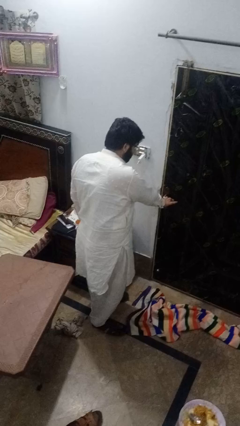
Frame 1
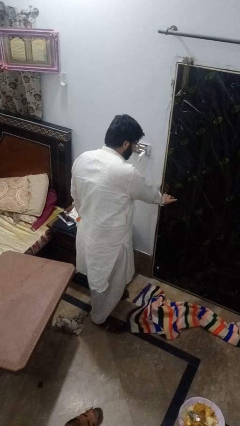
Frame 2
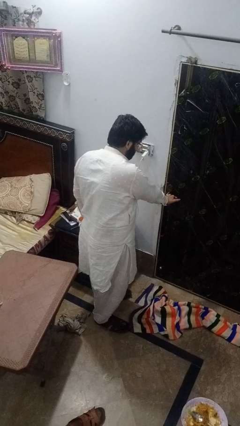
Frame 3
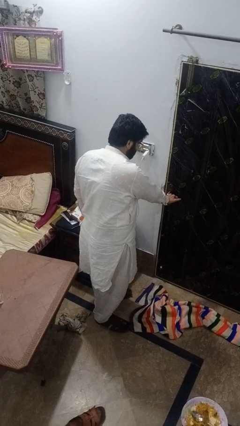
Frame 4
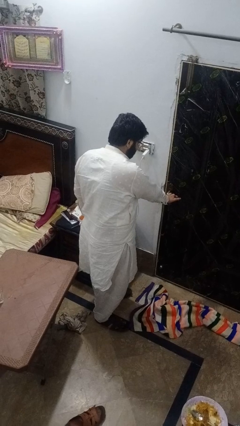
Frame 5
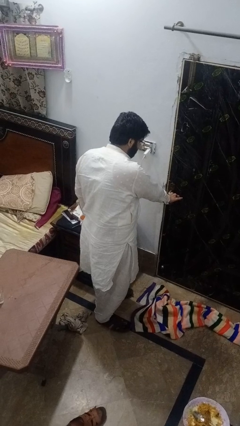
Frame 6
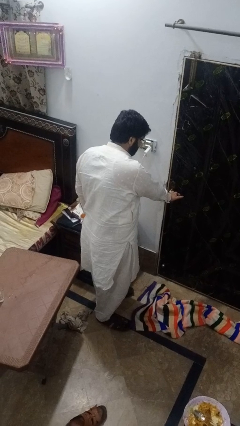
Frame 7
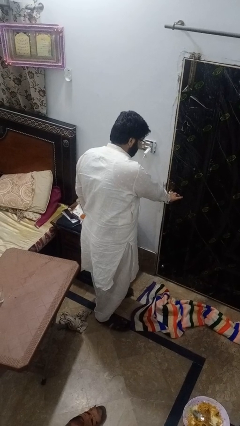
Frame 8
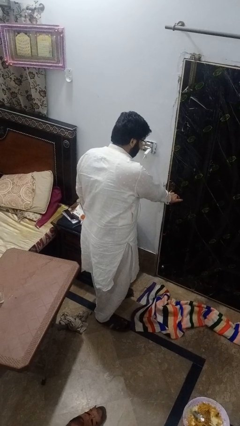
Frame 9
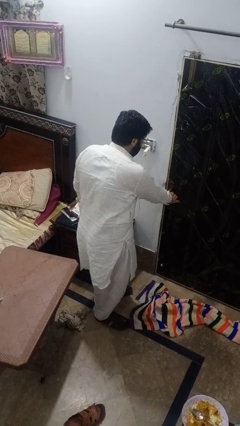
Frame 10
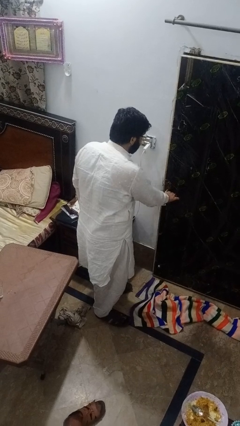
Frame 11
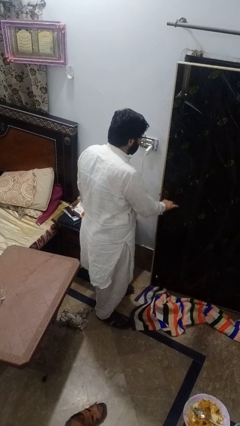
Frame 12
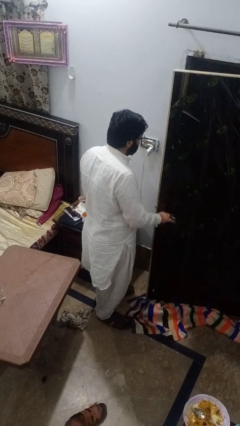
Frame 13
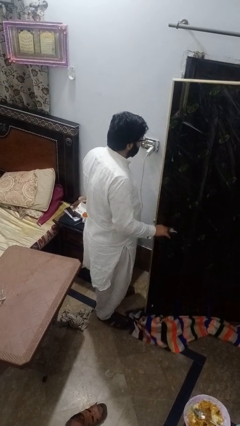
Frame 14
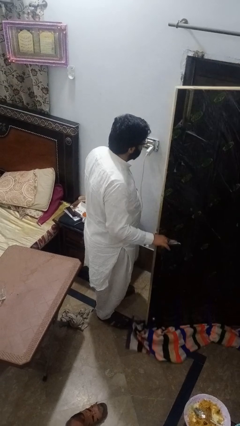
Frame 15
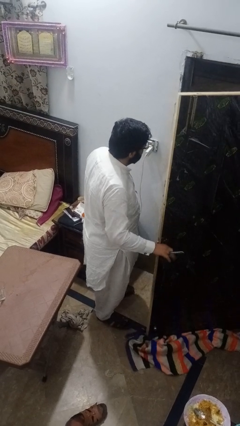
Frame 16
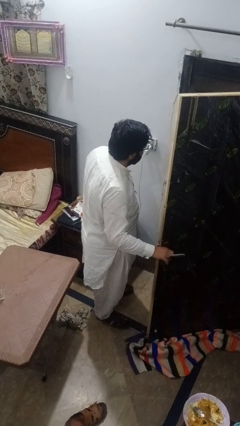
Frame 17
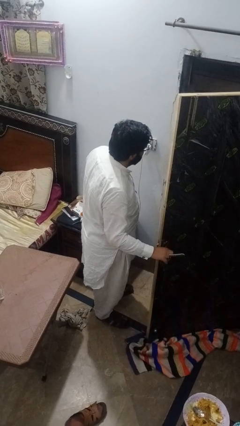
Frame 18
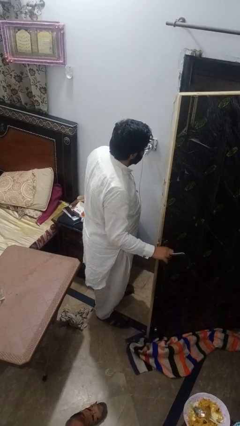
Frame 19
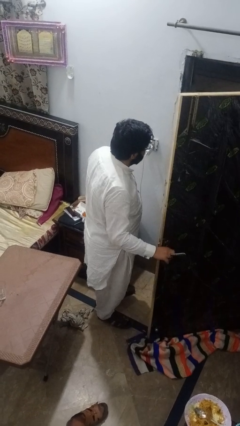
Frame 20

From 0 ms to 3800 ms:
person opens gate

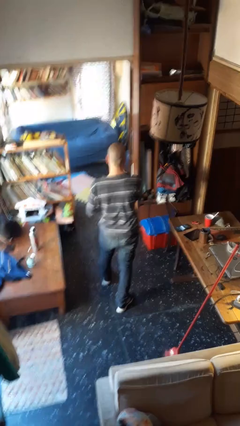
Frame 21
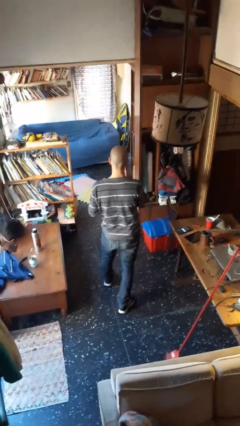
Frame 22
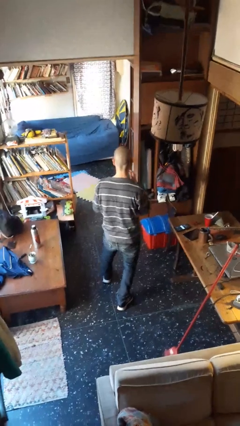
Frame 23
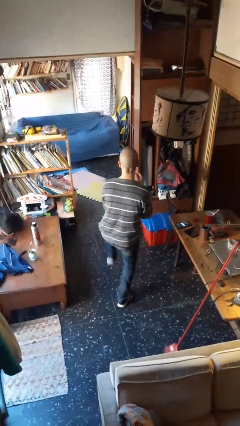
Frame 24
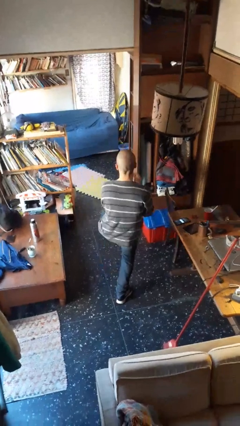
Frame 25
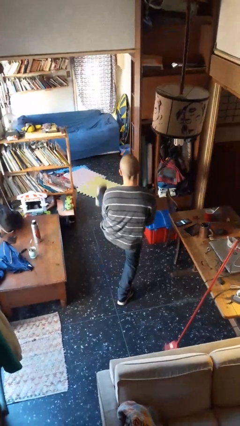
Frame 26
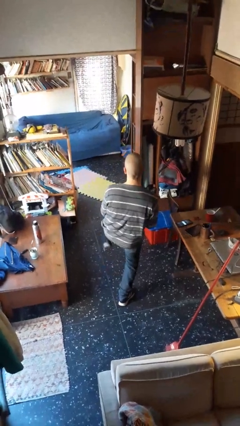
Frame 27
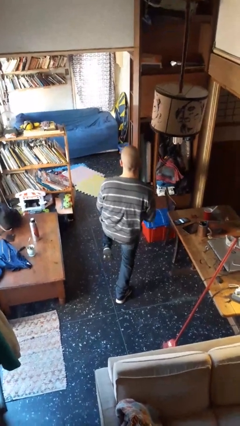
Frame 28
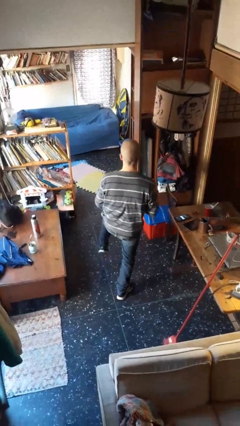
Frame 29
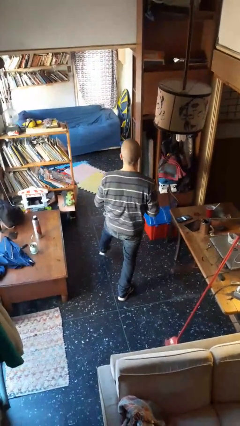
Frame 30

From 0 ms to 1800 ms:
person karate kicks

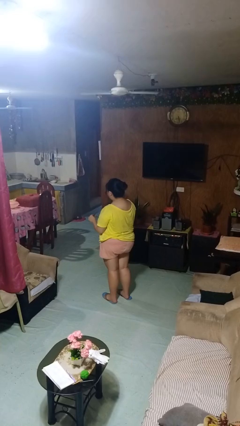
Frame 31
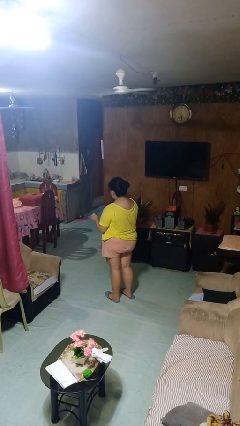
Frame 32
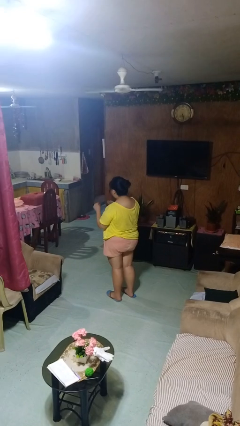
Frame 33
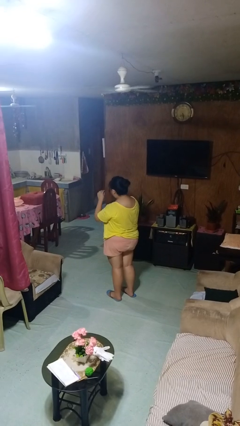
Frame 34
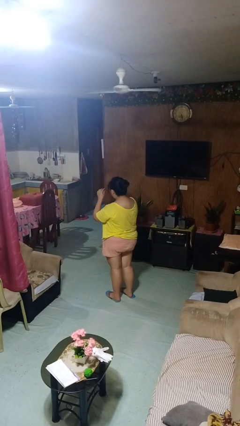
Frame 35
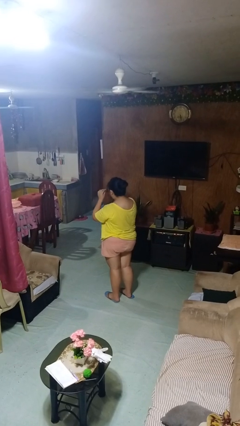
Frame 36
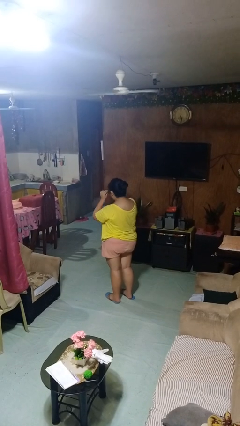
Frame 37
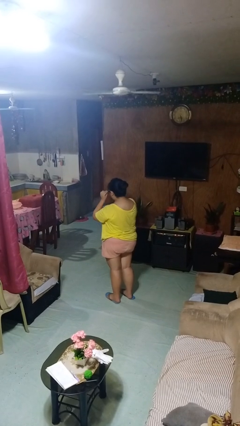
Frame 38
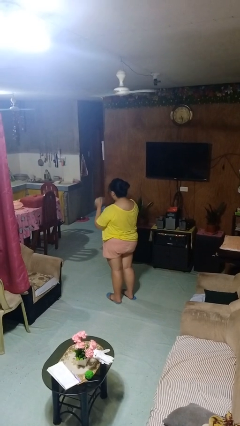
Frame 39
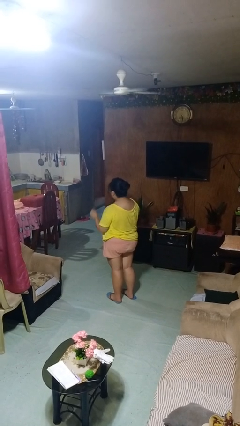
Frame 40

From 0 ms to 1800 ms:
person puts on glasses

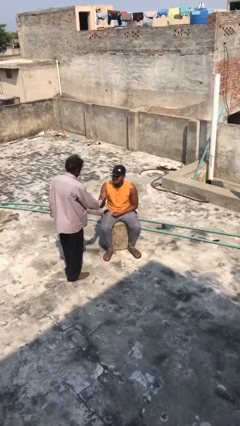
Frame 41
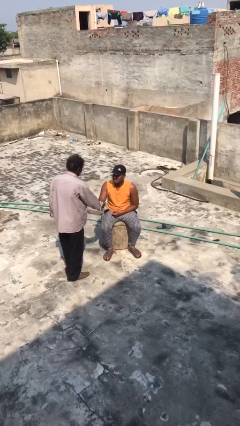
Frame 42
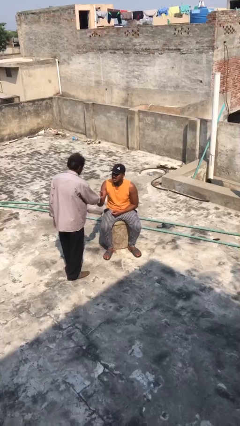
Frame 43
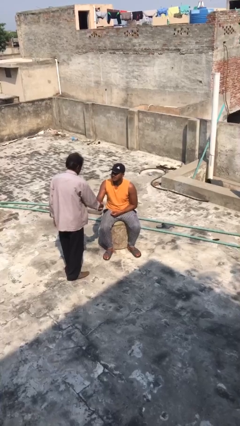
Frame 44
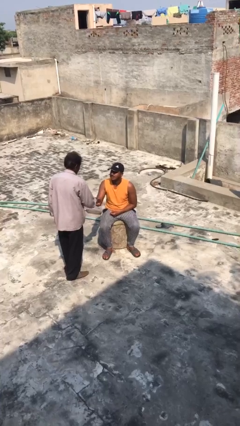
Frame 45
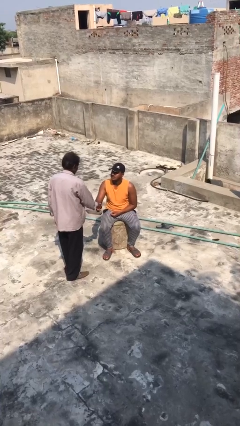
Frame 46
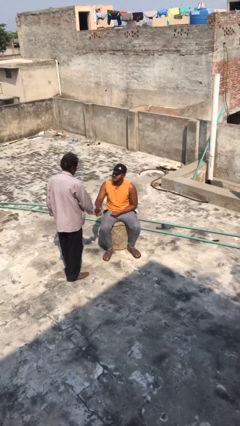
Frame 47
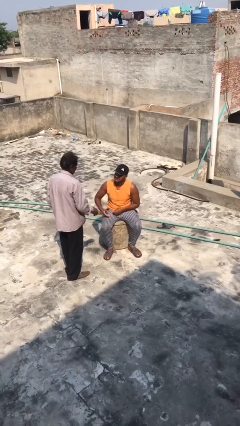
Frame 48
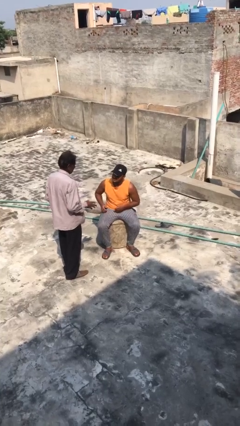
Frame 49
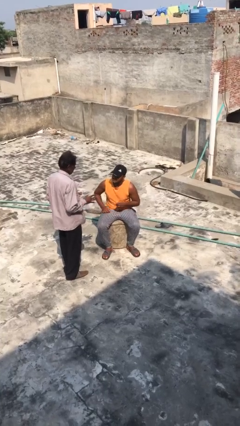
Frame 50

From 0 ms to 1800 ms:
person shakes hand

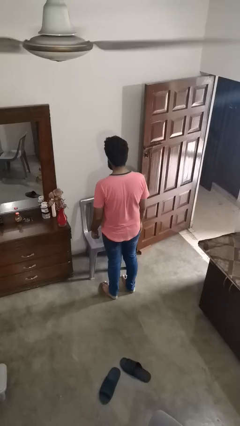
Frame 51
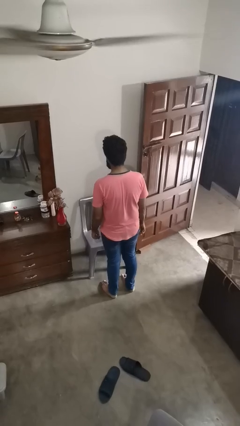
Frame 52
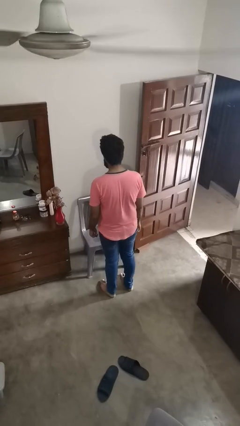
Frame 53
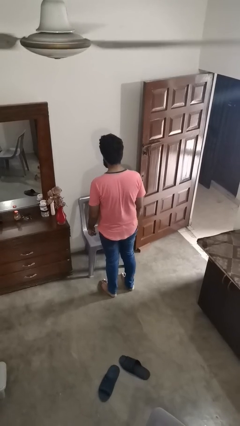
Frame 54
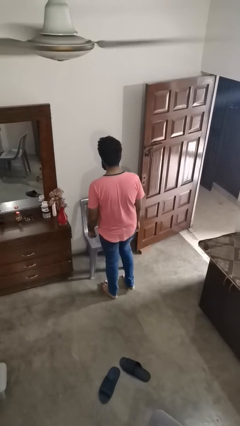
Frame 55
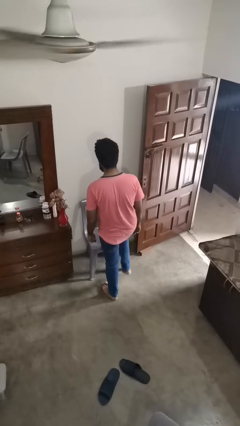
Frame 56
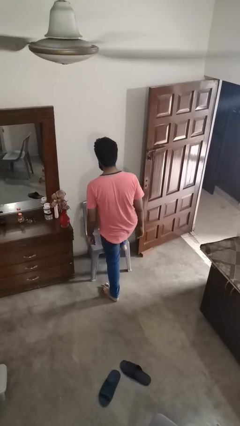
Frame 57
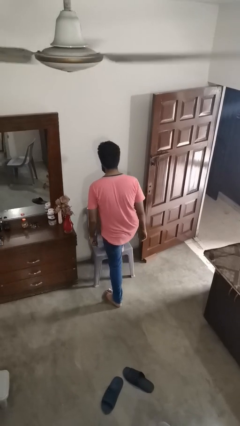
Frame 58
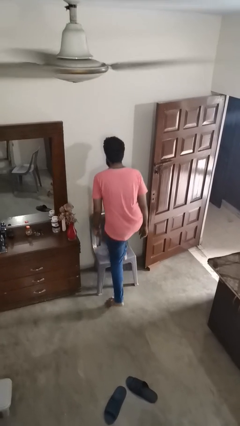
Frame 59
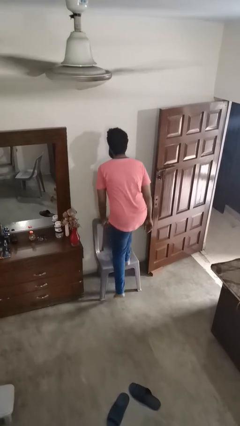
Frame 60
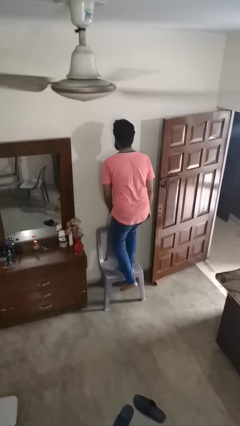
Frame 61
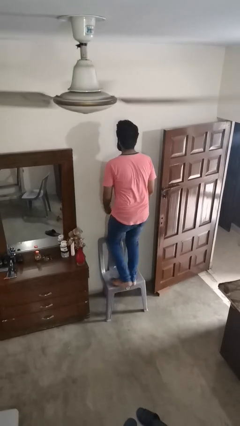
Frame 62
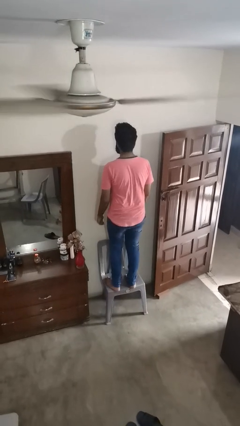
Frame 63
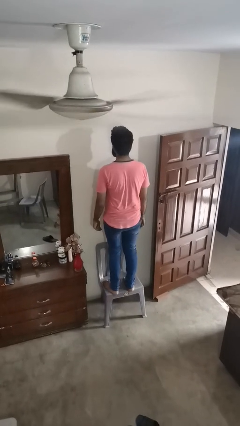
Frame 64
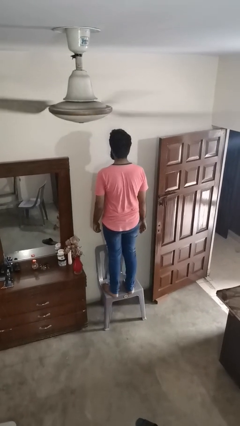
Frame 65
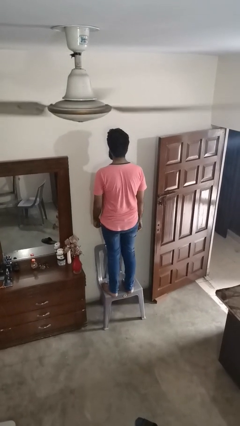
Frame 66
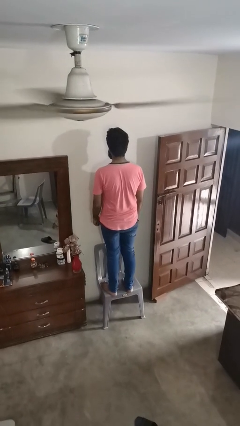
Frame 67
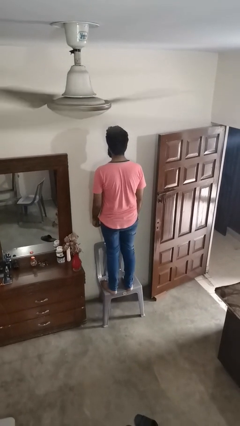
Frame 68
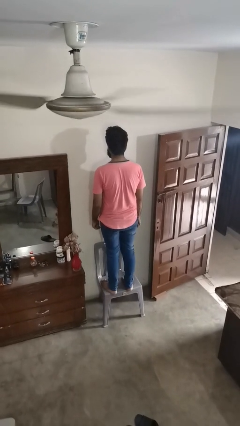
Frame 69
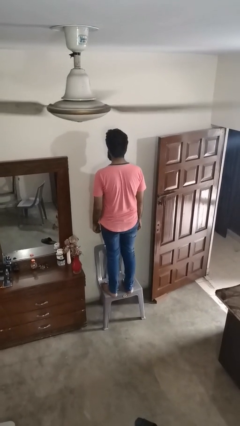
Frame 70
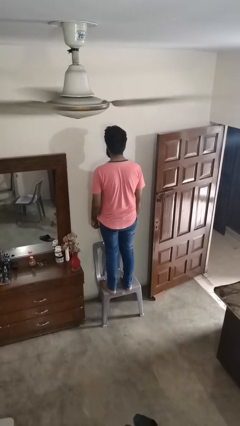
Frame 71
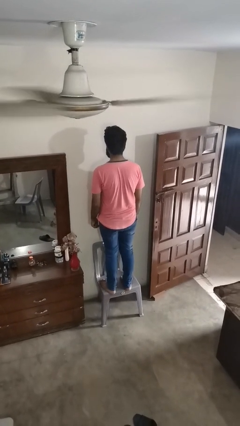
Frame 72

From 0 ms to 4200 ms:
person climbs on chair

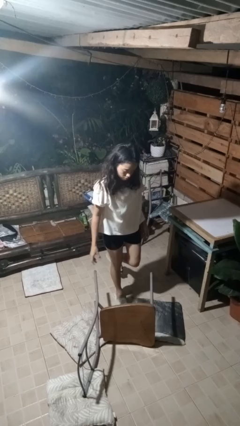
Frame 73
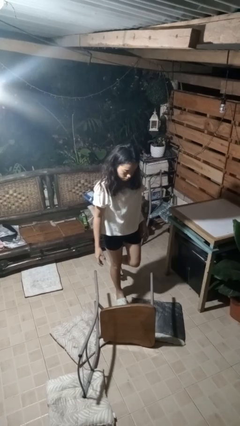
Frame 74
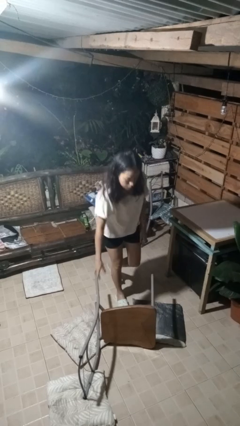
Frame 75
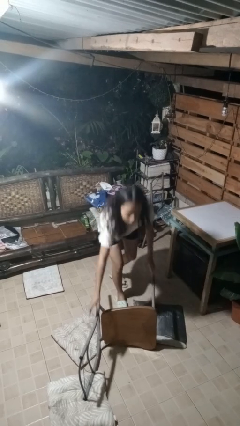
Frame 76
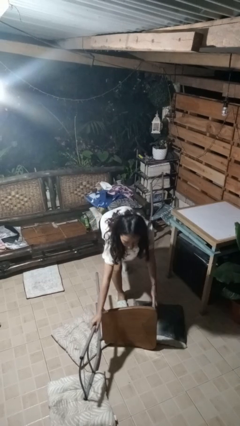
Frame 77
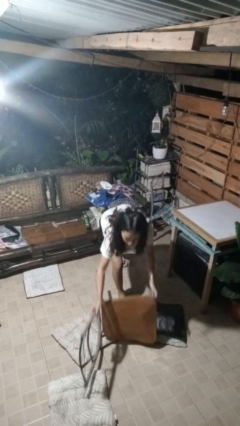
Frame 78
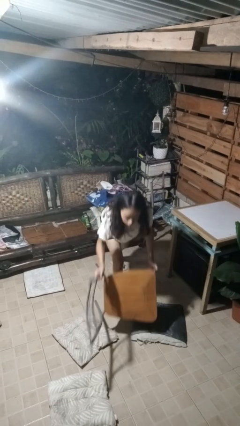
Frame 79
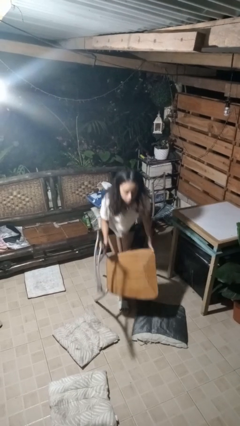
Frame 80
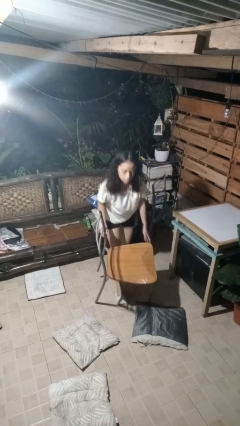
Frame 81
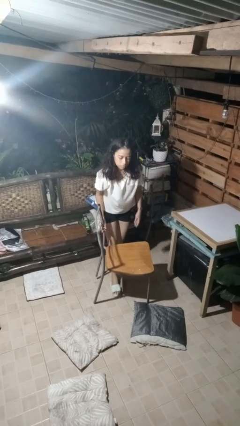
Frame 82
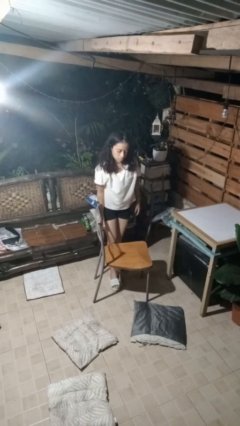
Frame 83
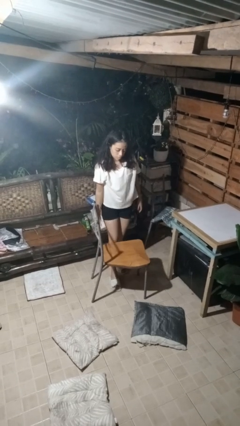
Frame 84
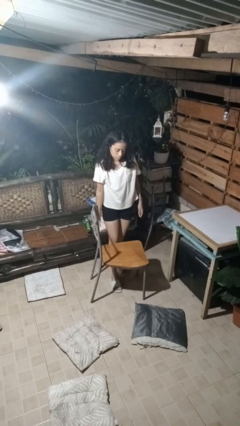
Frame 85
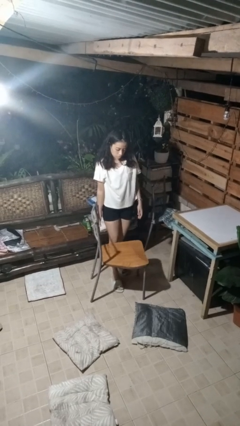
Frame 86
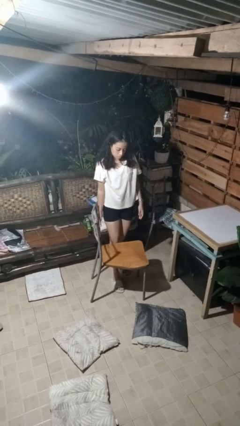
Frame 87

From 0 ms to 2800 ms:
person sets upright furniture

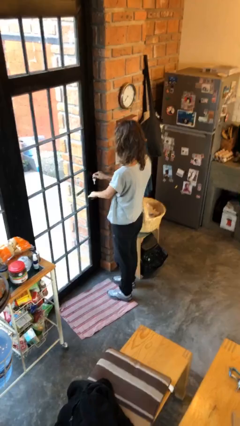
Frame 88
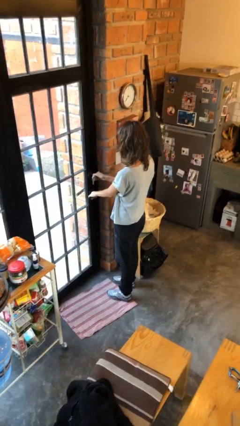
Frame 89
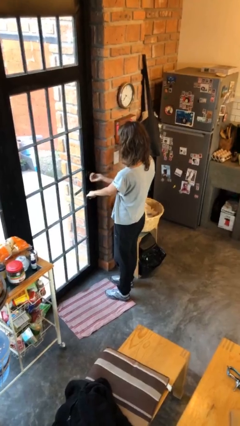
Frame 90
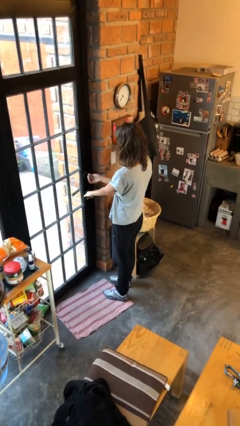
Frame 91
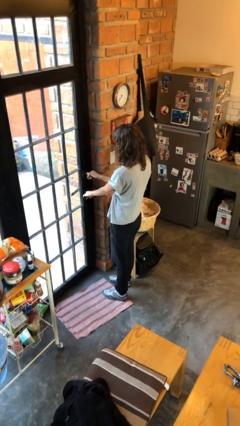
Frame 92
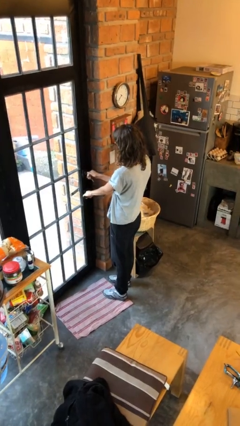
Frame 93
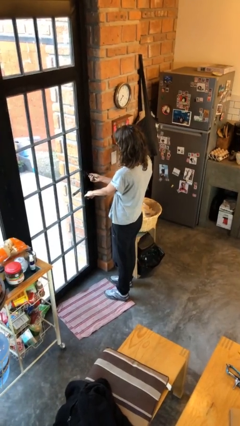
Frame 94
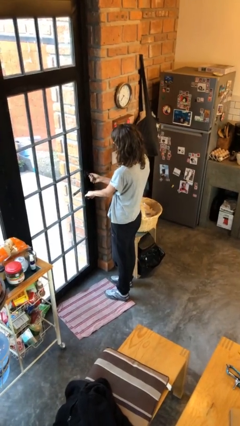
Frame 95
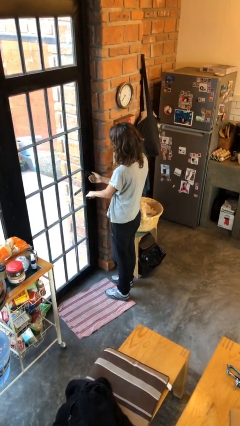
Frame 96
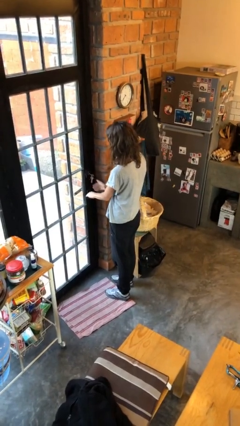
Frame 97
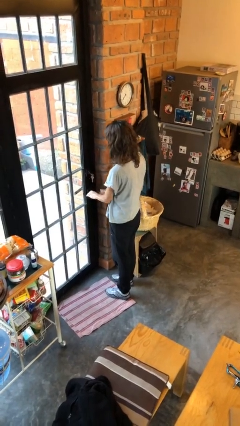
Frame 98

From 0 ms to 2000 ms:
person locks door with keys
